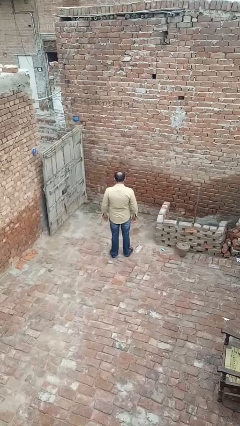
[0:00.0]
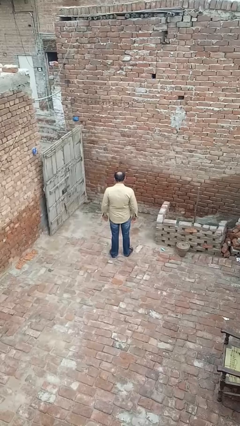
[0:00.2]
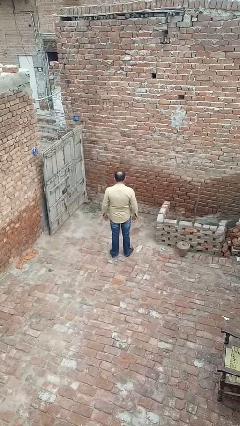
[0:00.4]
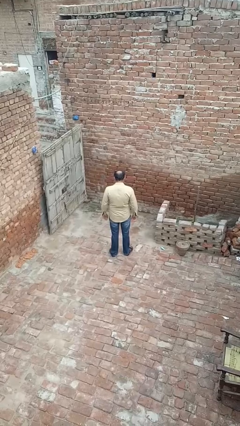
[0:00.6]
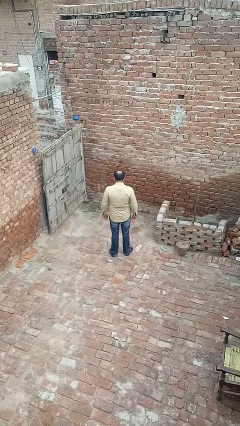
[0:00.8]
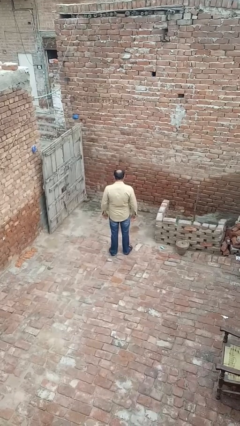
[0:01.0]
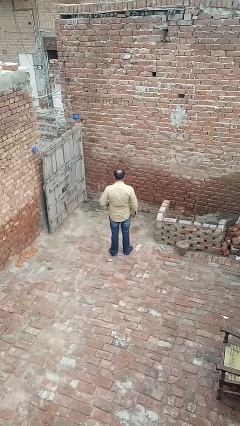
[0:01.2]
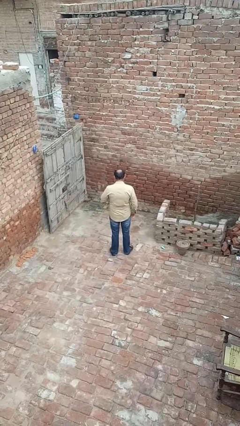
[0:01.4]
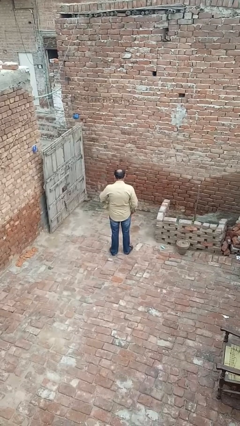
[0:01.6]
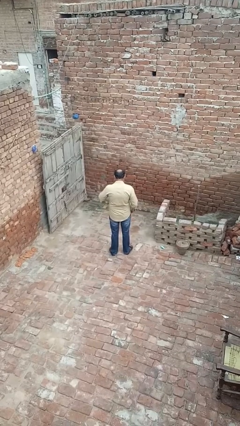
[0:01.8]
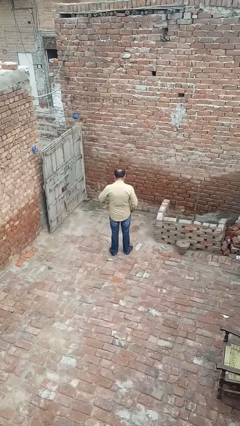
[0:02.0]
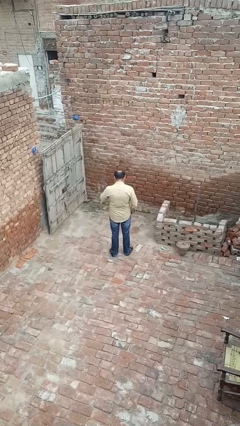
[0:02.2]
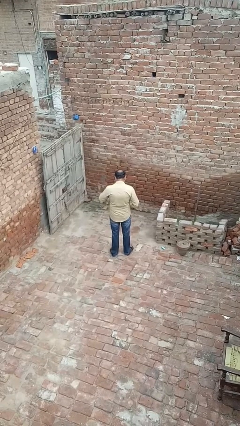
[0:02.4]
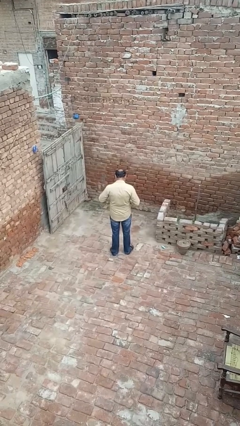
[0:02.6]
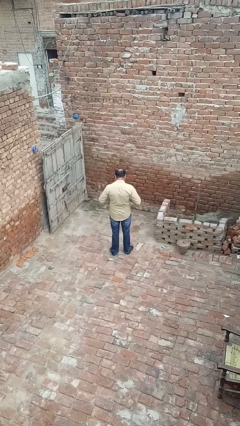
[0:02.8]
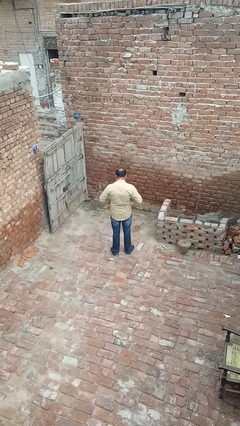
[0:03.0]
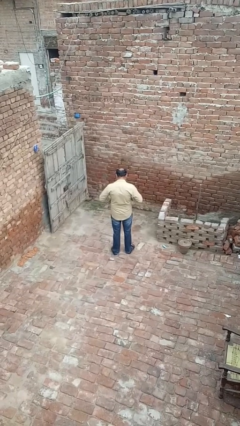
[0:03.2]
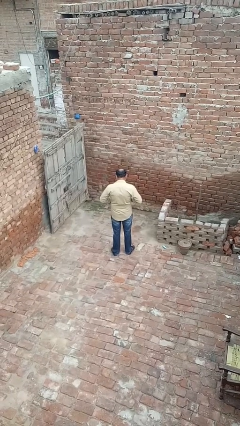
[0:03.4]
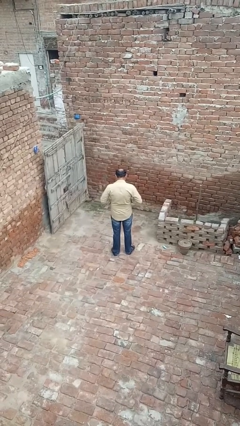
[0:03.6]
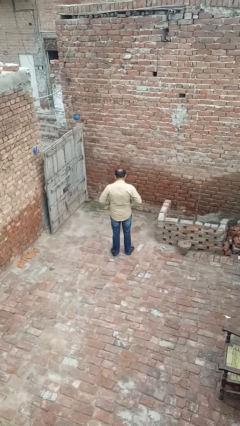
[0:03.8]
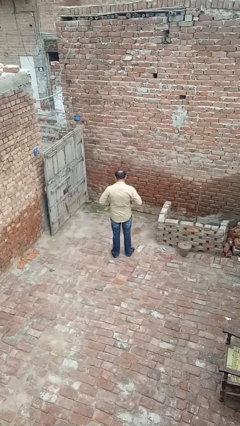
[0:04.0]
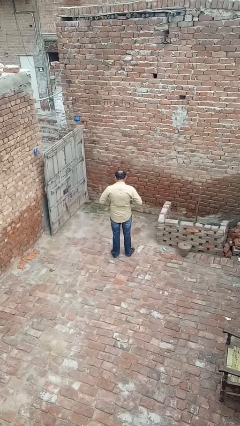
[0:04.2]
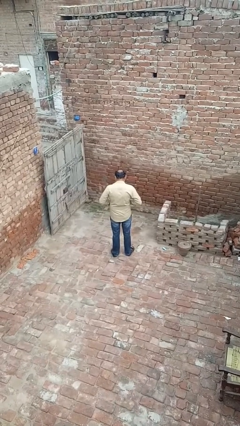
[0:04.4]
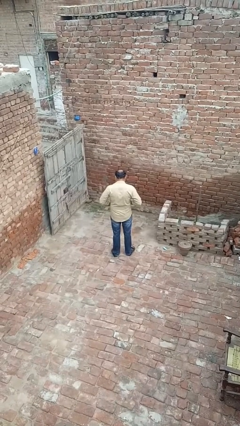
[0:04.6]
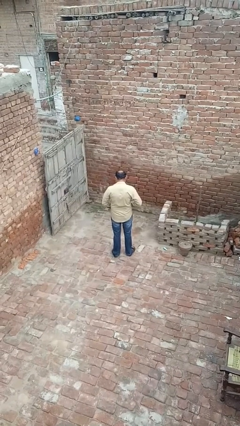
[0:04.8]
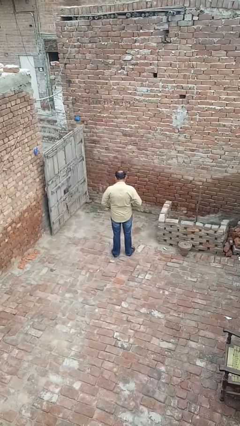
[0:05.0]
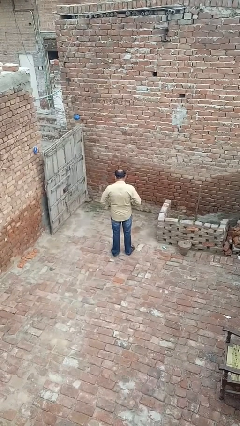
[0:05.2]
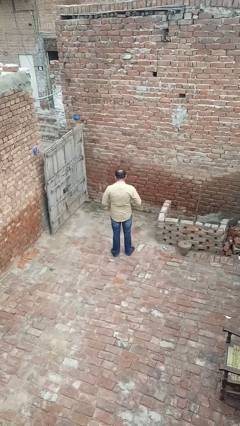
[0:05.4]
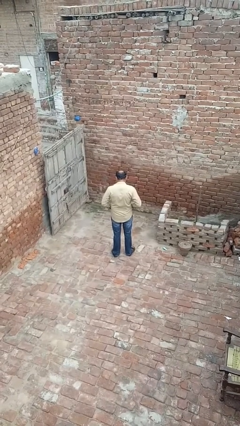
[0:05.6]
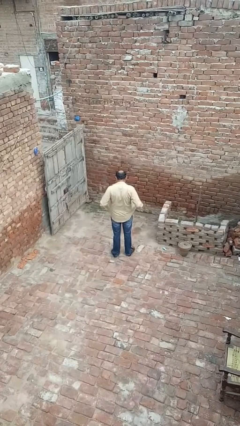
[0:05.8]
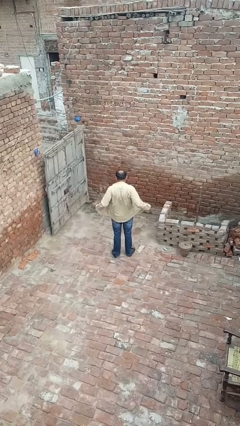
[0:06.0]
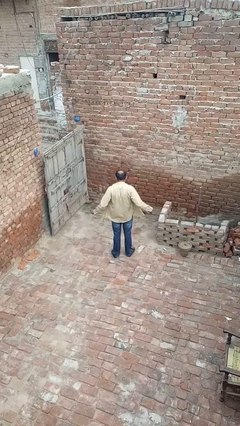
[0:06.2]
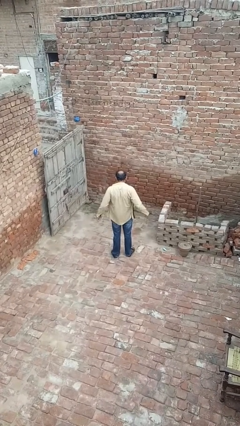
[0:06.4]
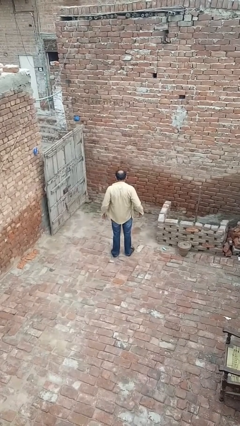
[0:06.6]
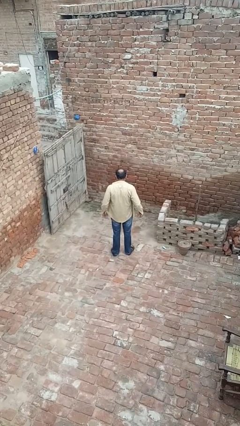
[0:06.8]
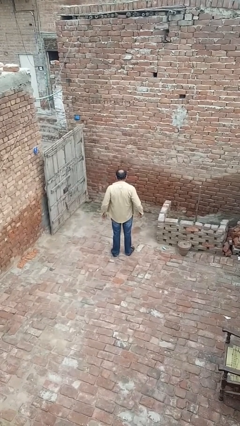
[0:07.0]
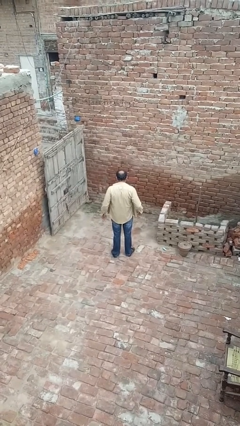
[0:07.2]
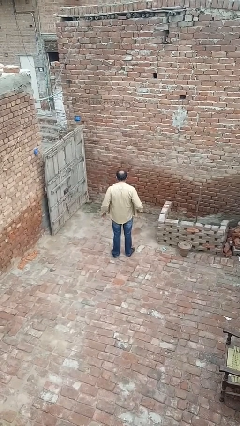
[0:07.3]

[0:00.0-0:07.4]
person unbuttons shirt

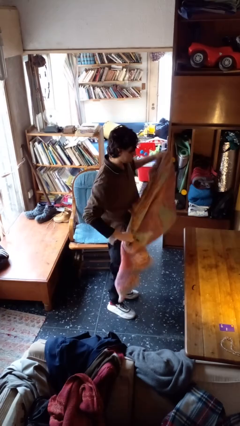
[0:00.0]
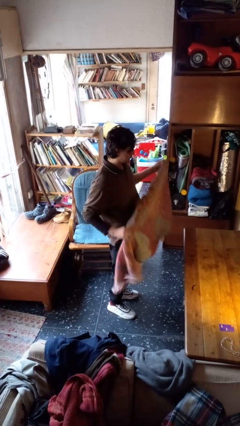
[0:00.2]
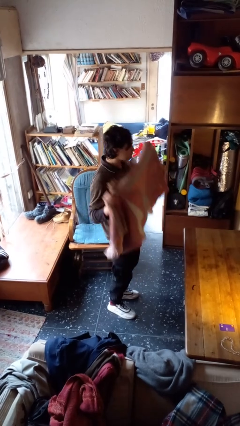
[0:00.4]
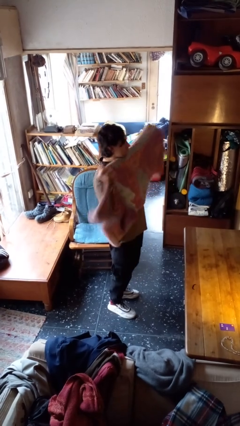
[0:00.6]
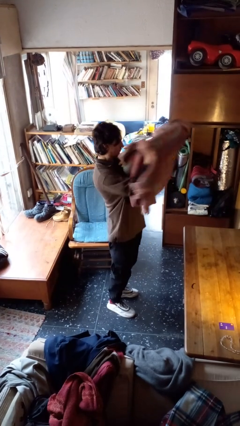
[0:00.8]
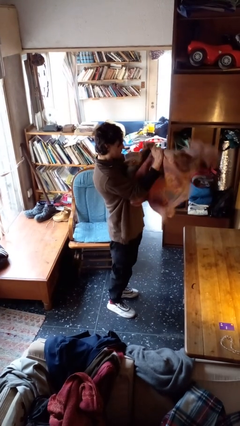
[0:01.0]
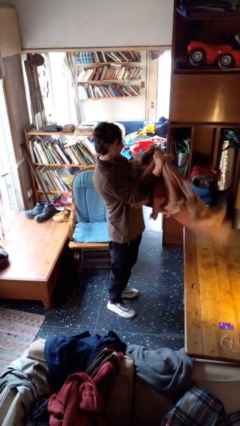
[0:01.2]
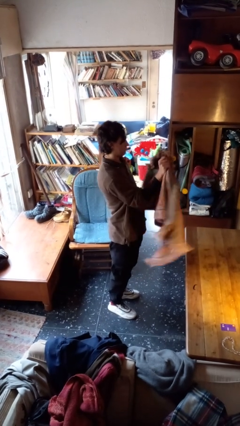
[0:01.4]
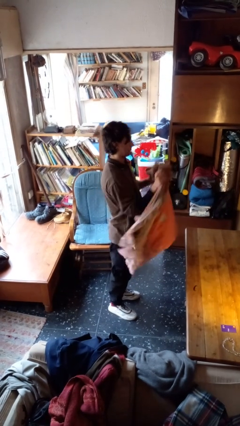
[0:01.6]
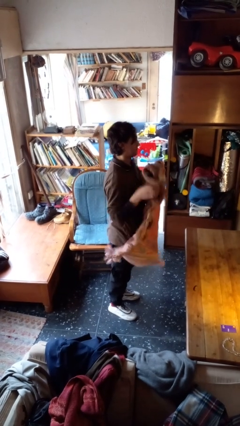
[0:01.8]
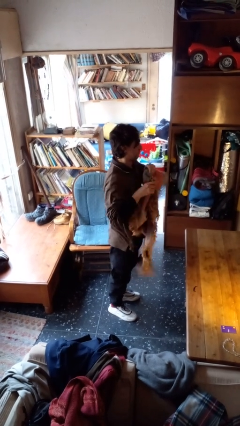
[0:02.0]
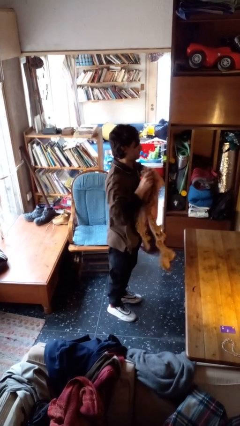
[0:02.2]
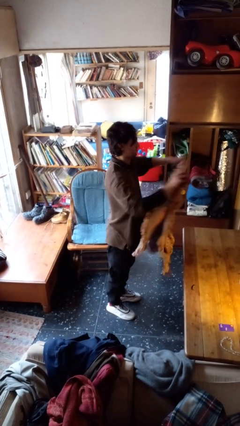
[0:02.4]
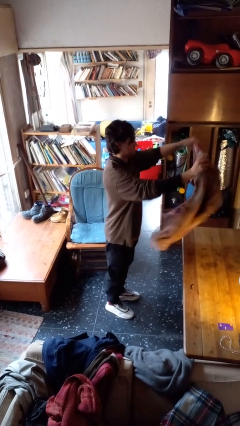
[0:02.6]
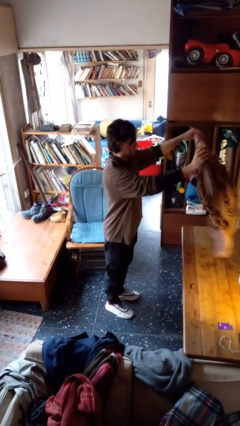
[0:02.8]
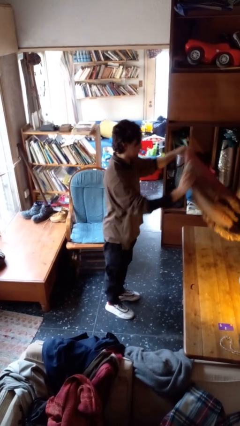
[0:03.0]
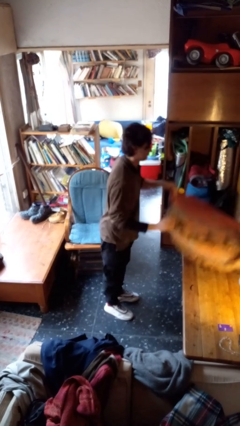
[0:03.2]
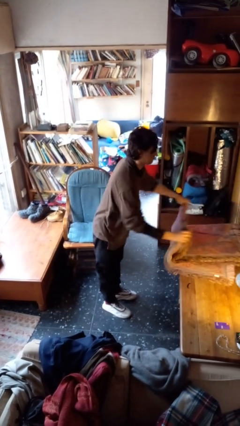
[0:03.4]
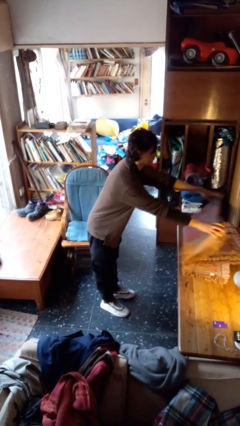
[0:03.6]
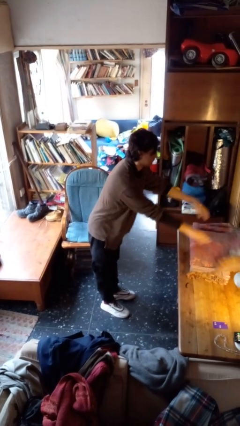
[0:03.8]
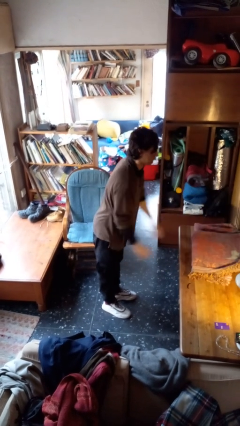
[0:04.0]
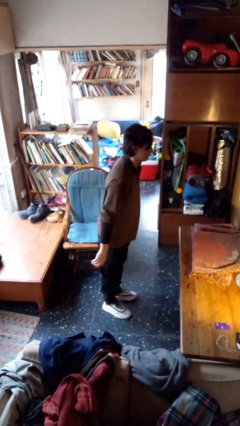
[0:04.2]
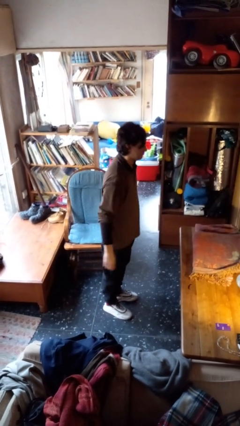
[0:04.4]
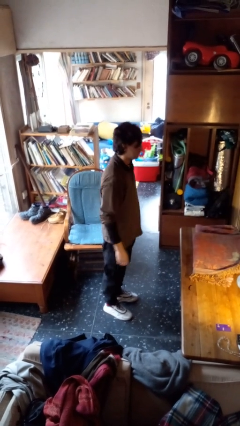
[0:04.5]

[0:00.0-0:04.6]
person folds blanket

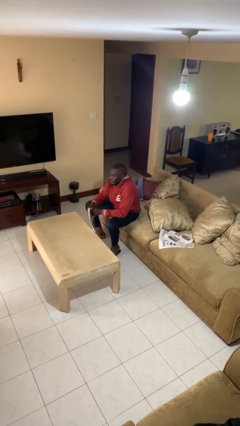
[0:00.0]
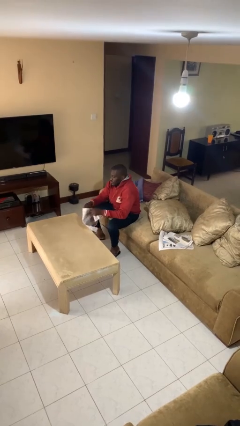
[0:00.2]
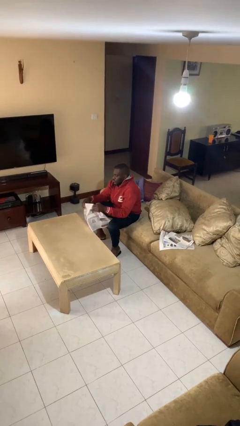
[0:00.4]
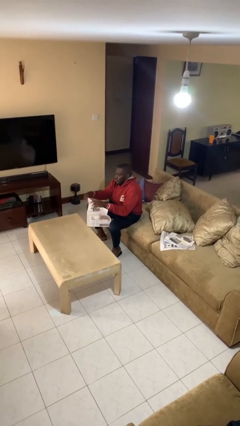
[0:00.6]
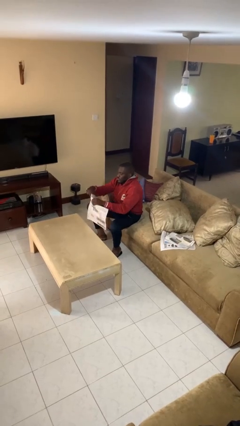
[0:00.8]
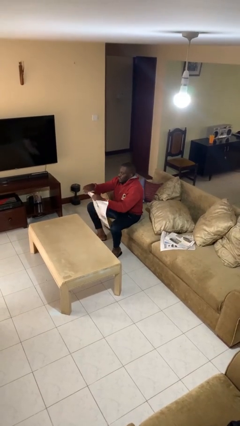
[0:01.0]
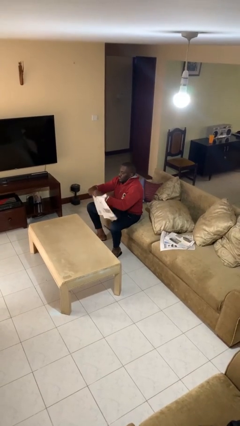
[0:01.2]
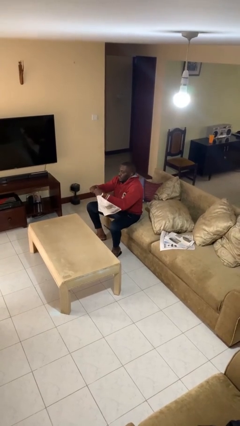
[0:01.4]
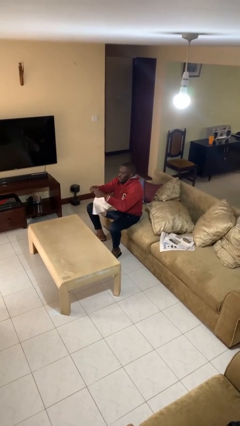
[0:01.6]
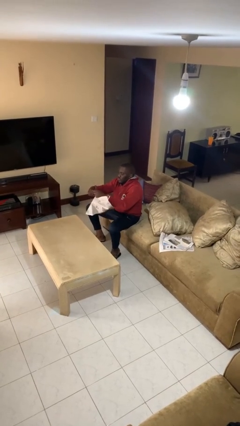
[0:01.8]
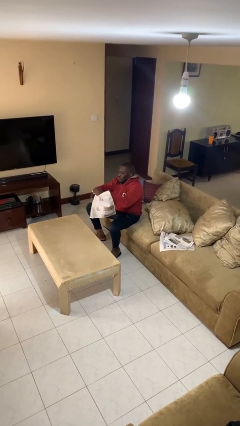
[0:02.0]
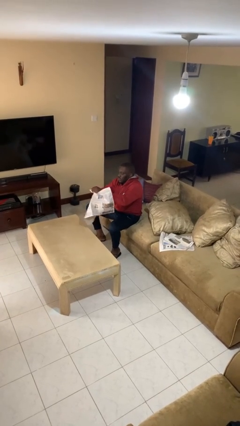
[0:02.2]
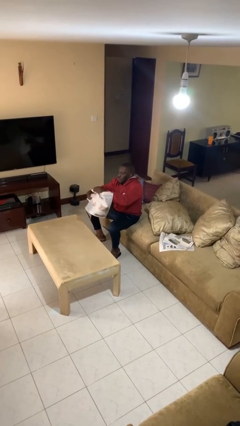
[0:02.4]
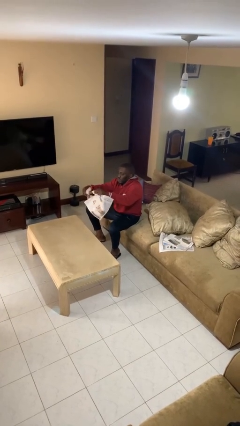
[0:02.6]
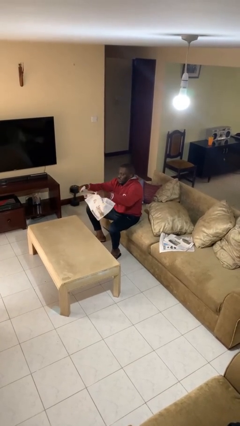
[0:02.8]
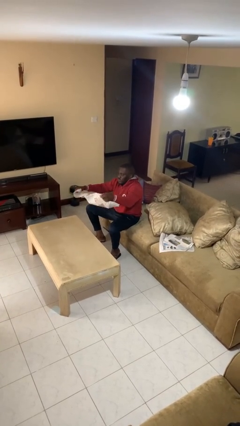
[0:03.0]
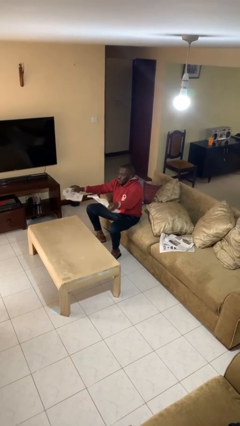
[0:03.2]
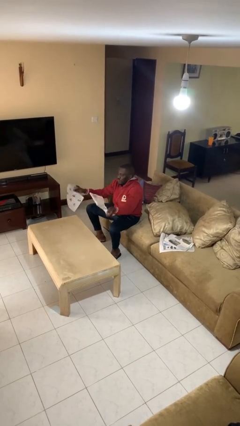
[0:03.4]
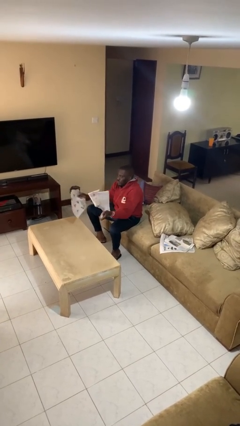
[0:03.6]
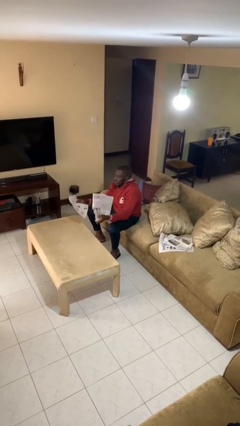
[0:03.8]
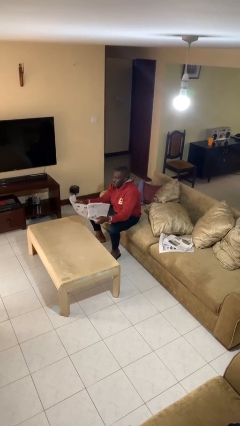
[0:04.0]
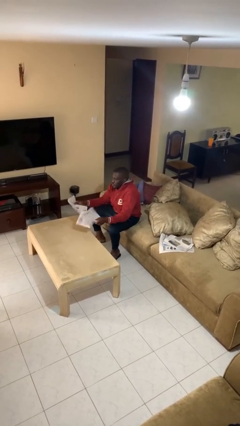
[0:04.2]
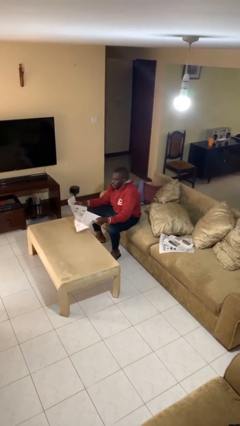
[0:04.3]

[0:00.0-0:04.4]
person tears paper

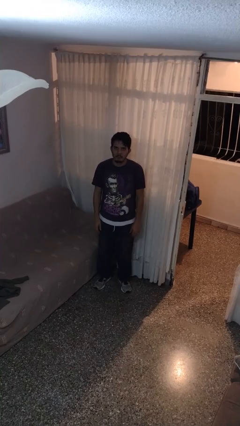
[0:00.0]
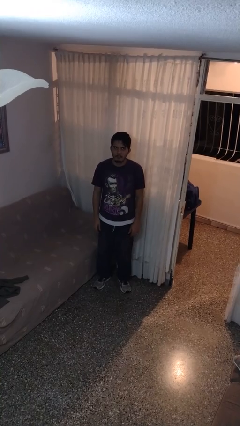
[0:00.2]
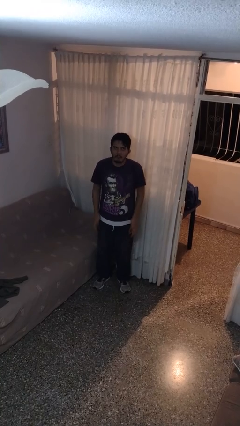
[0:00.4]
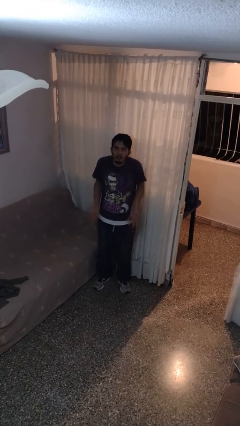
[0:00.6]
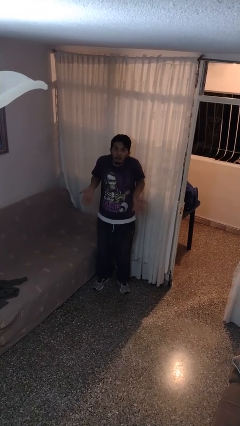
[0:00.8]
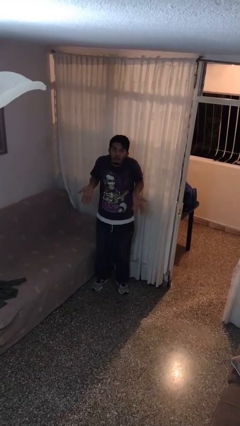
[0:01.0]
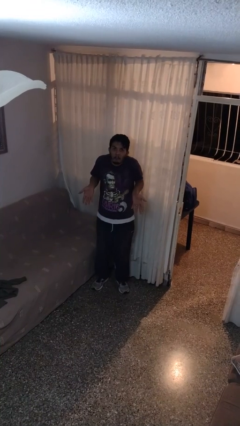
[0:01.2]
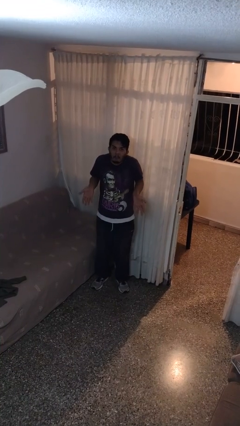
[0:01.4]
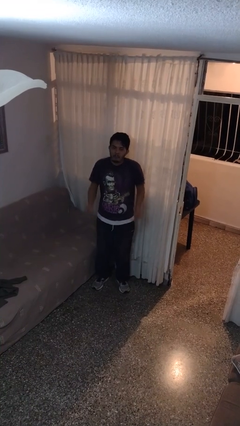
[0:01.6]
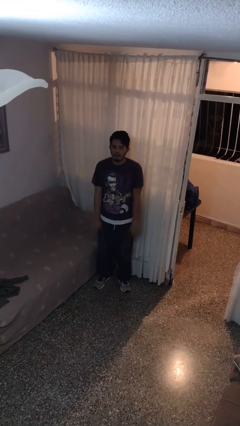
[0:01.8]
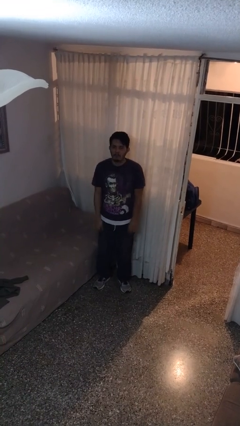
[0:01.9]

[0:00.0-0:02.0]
person shrugs
